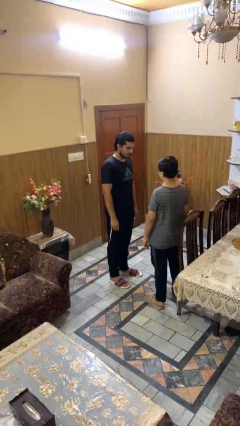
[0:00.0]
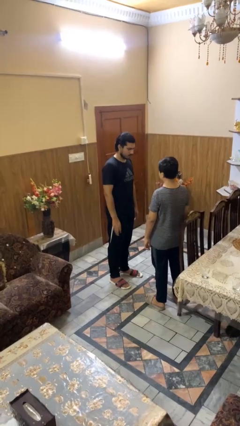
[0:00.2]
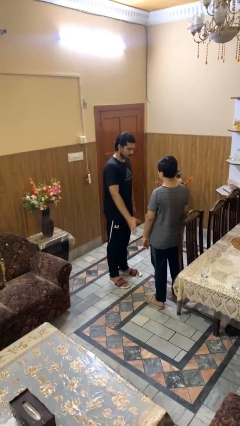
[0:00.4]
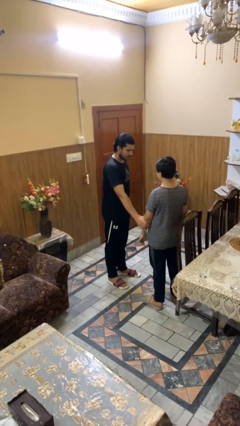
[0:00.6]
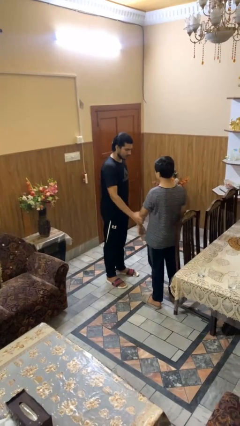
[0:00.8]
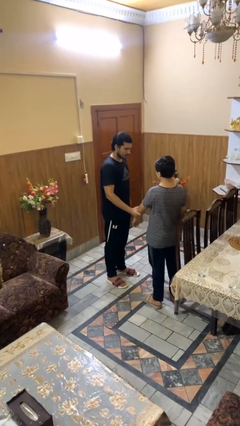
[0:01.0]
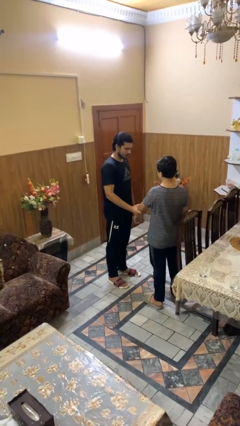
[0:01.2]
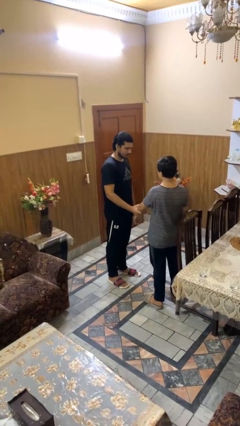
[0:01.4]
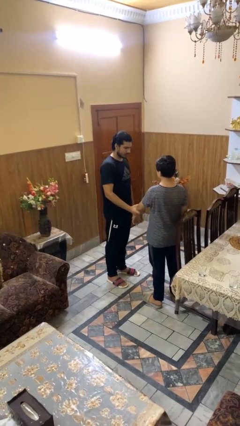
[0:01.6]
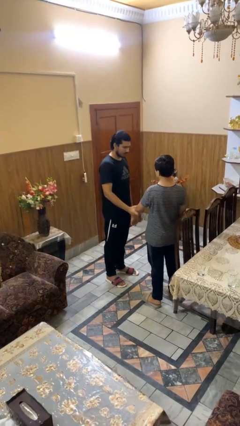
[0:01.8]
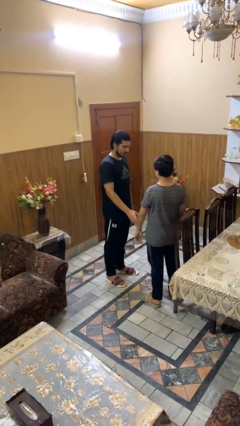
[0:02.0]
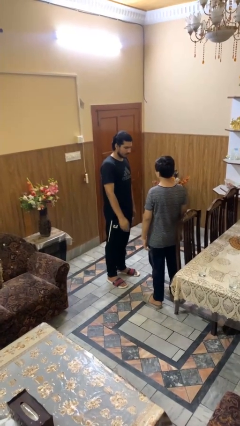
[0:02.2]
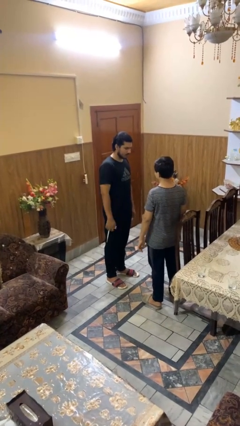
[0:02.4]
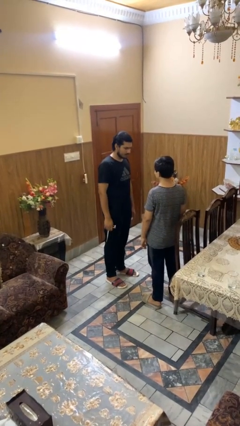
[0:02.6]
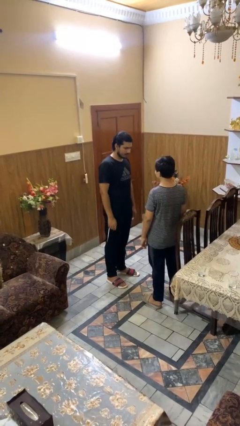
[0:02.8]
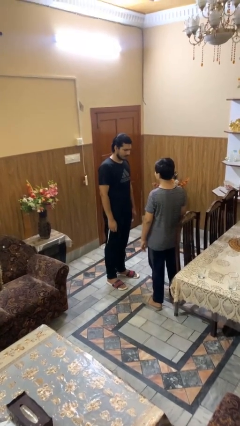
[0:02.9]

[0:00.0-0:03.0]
person grabs person by forearm

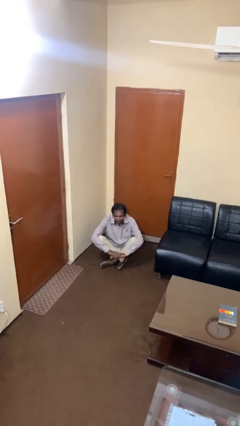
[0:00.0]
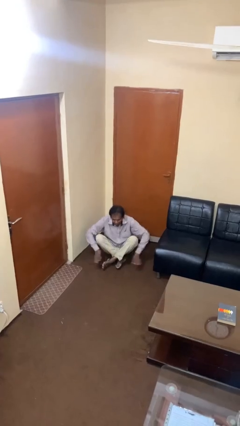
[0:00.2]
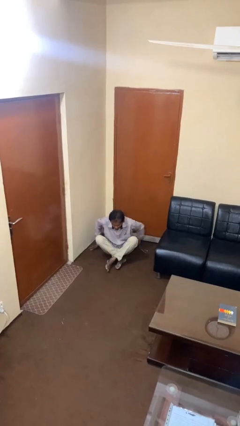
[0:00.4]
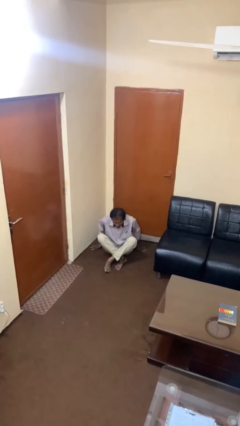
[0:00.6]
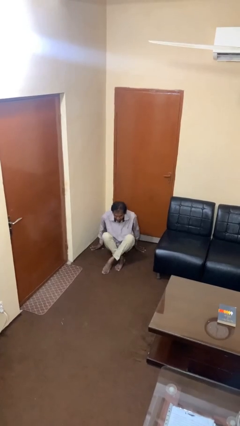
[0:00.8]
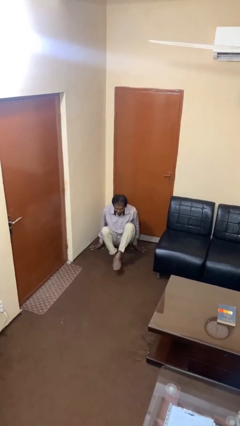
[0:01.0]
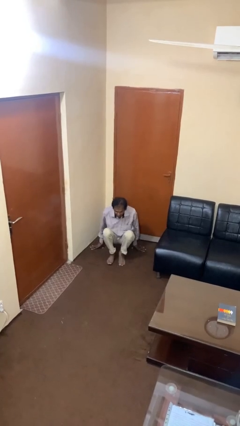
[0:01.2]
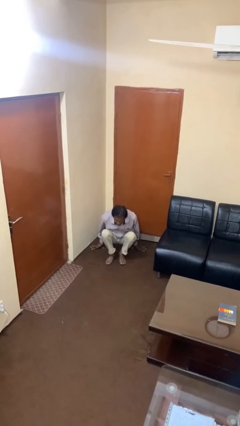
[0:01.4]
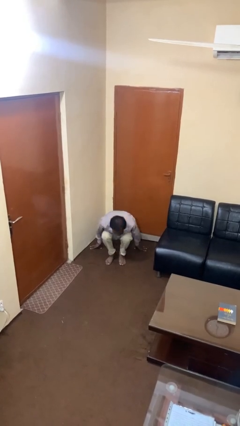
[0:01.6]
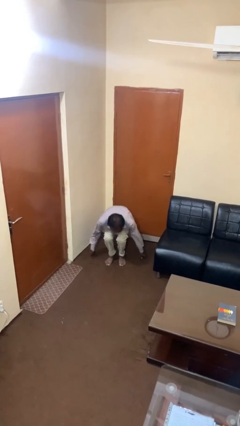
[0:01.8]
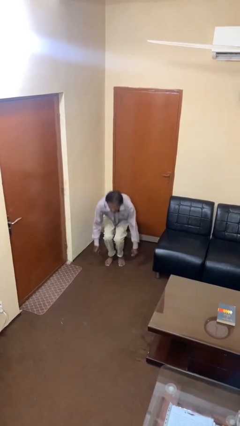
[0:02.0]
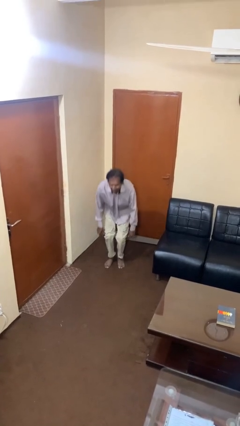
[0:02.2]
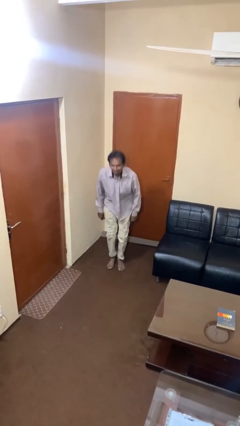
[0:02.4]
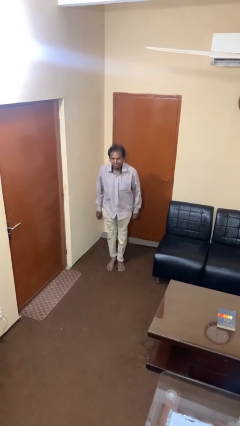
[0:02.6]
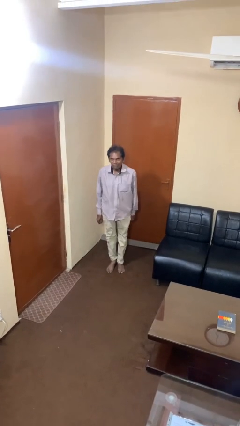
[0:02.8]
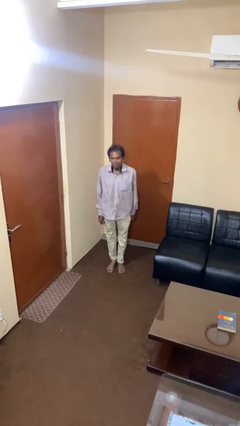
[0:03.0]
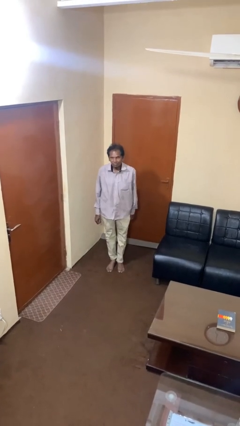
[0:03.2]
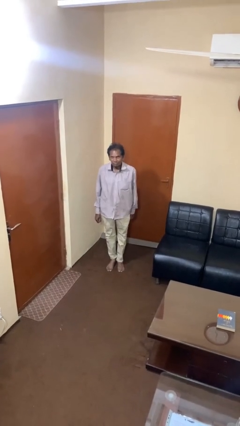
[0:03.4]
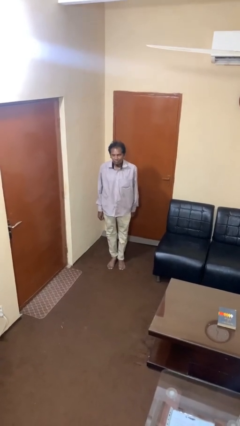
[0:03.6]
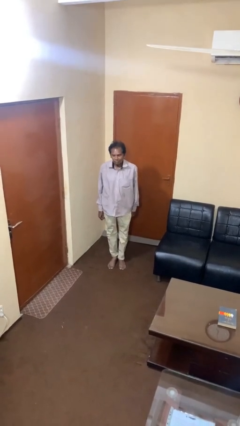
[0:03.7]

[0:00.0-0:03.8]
person stands up from floor

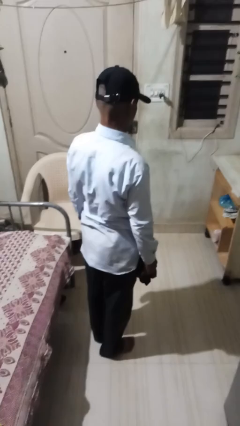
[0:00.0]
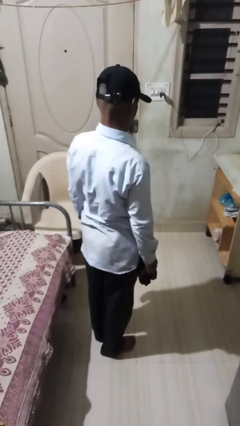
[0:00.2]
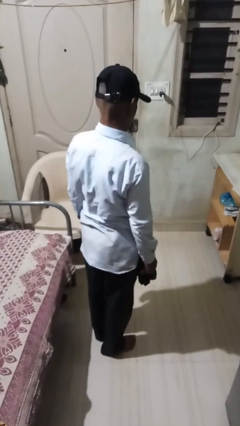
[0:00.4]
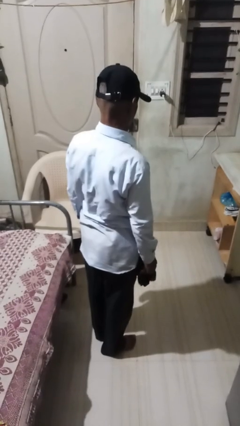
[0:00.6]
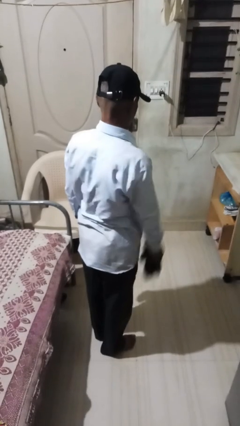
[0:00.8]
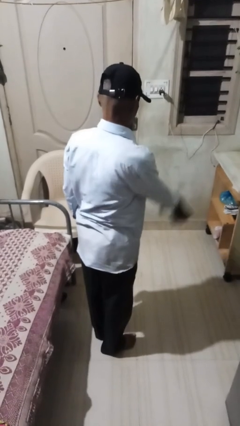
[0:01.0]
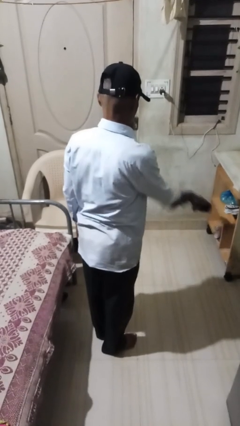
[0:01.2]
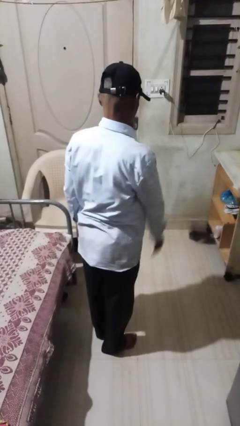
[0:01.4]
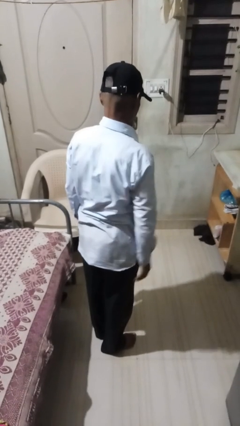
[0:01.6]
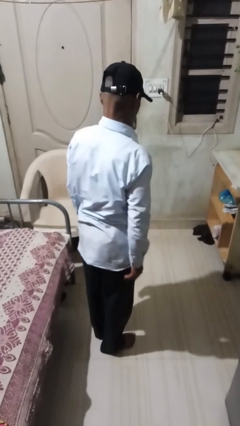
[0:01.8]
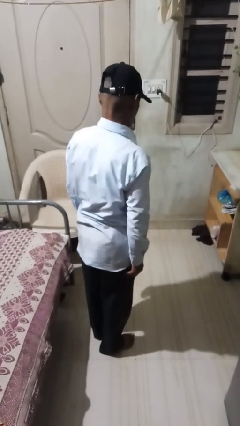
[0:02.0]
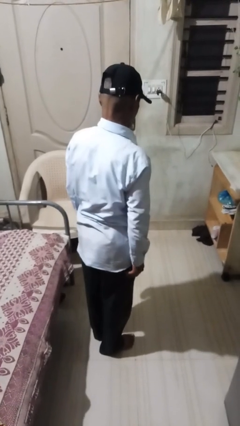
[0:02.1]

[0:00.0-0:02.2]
person throws object to ground

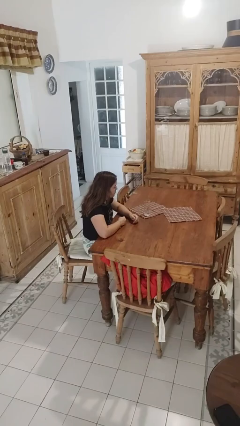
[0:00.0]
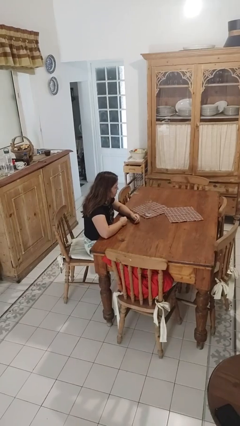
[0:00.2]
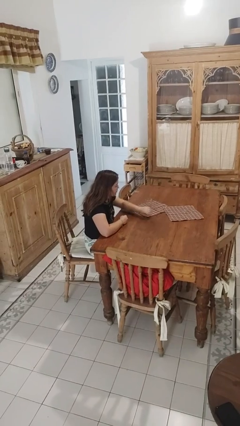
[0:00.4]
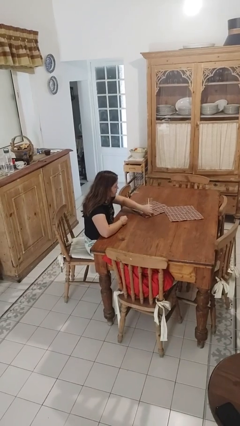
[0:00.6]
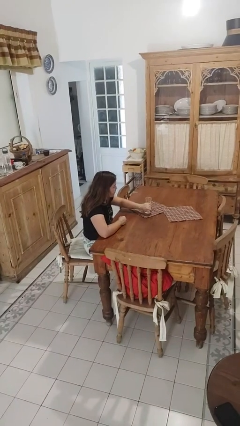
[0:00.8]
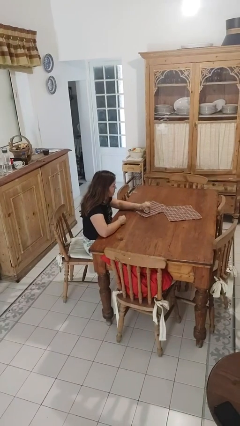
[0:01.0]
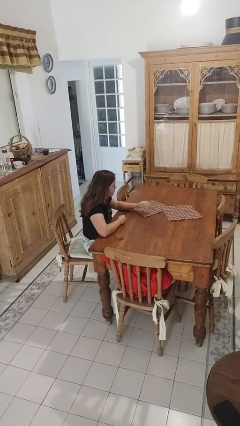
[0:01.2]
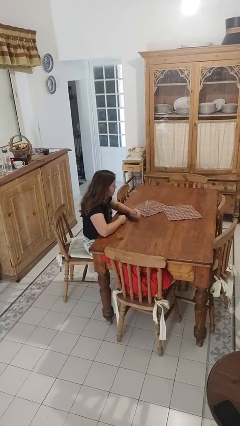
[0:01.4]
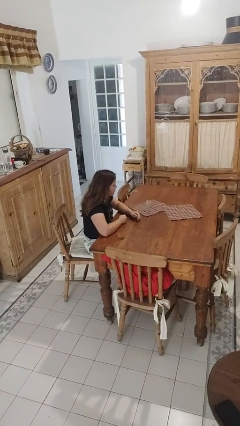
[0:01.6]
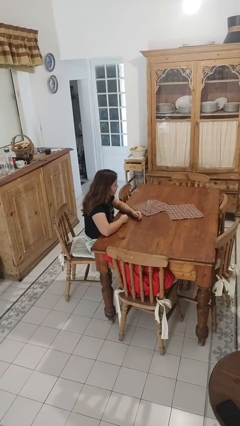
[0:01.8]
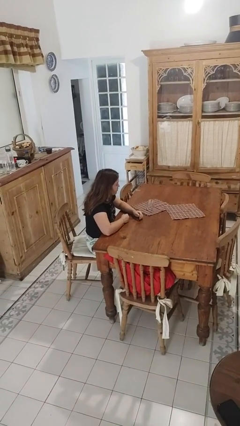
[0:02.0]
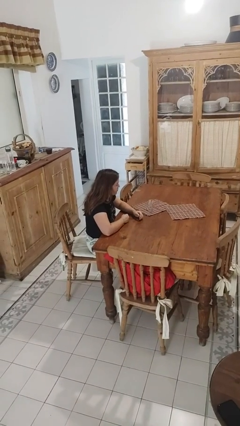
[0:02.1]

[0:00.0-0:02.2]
person knocks over glass

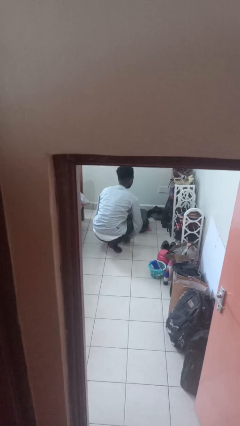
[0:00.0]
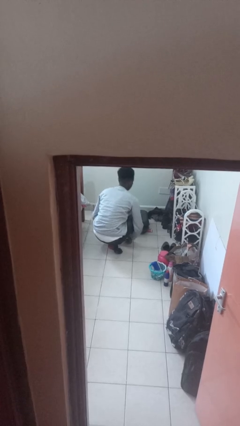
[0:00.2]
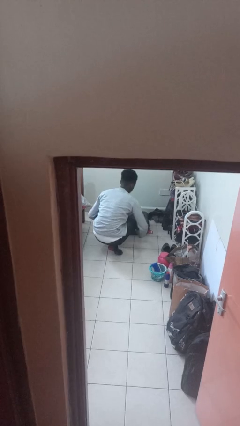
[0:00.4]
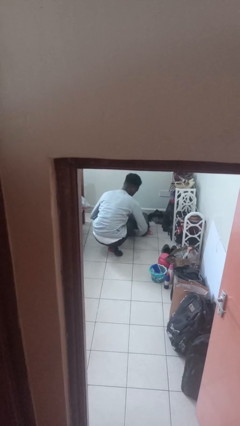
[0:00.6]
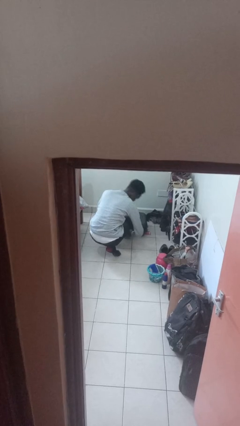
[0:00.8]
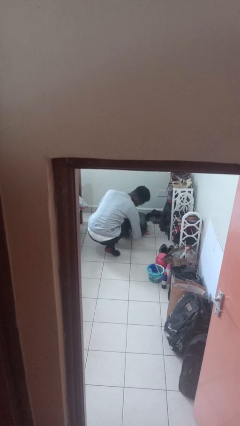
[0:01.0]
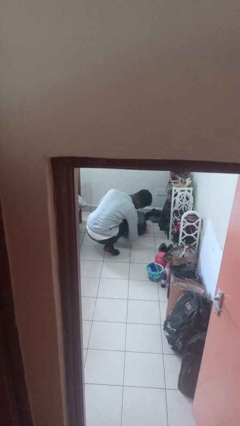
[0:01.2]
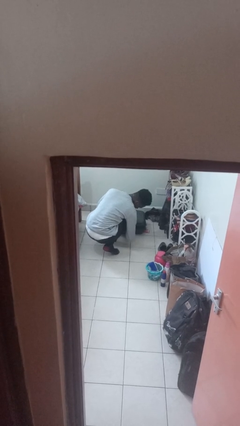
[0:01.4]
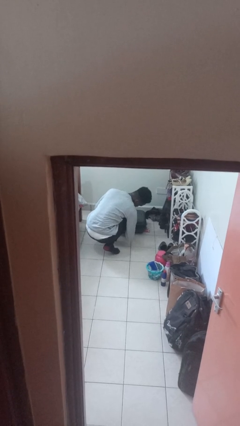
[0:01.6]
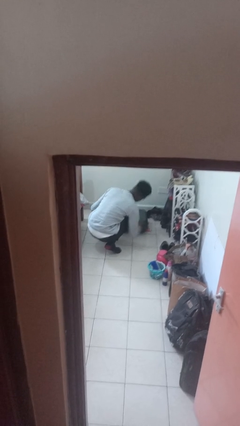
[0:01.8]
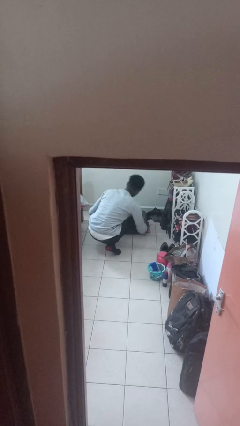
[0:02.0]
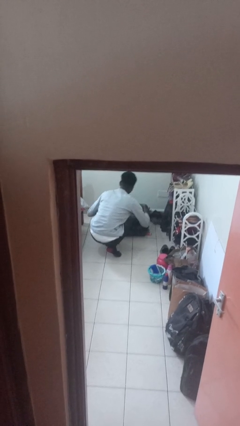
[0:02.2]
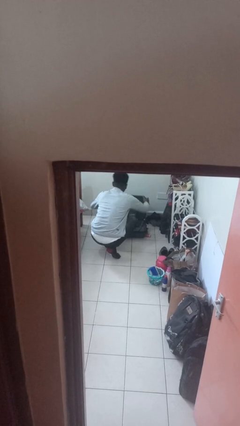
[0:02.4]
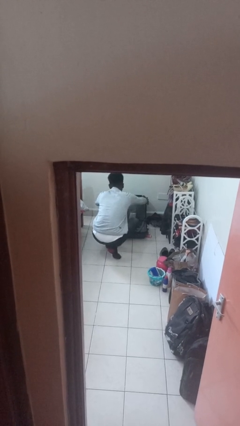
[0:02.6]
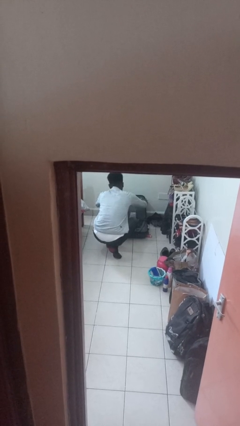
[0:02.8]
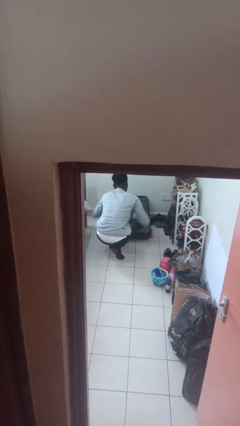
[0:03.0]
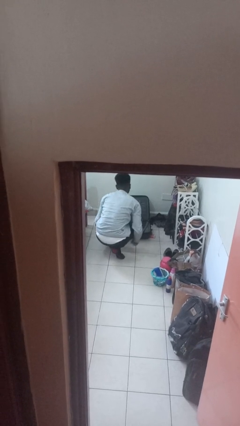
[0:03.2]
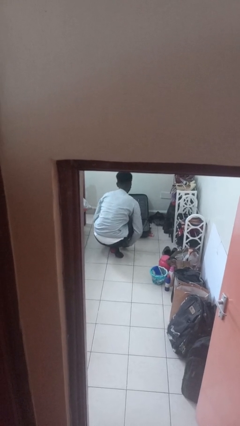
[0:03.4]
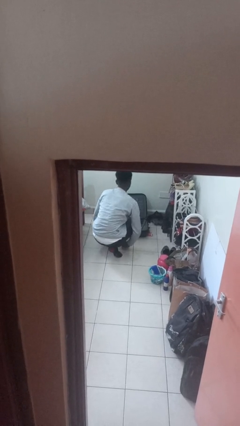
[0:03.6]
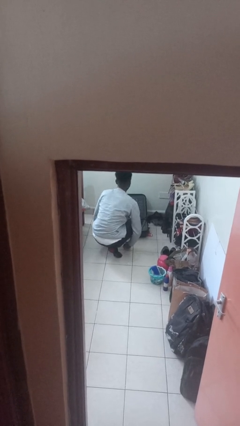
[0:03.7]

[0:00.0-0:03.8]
person opens suitcase

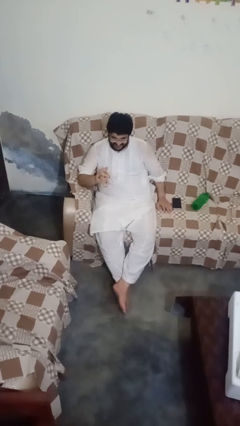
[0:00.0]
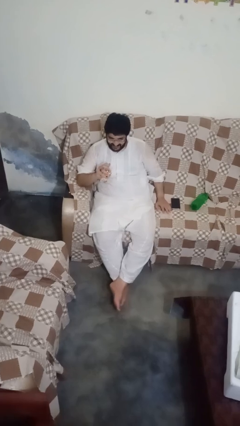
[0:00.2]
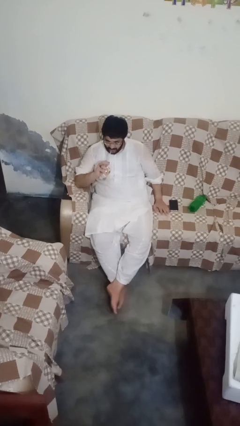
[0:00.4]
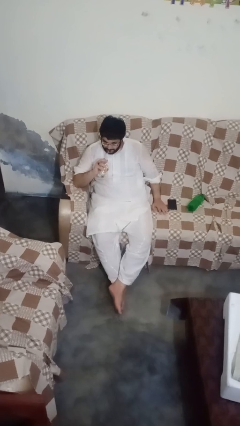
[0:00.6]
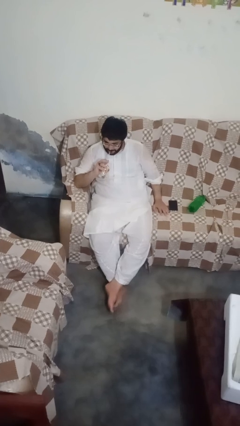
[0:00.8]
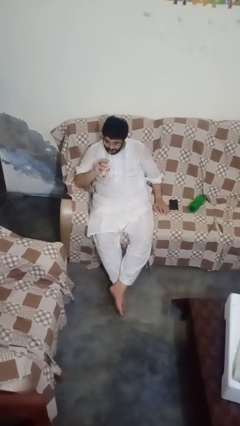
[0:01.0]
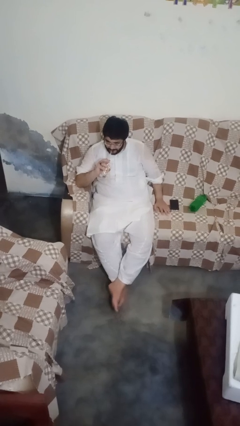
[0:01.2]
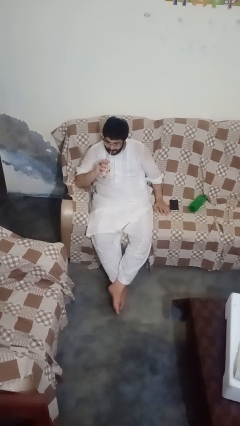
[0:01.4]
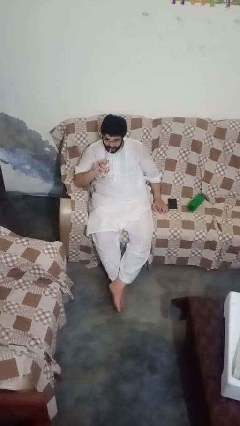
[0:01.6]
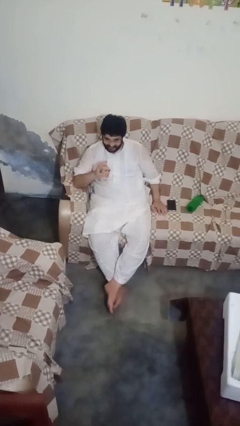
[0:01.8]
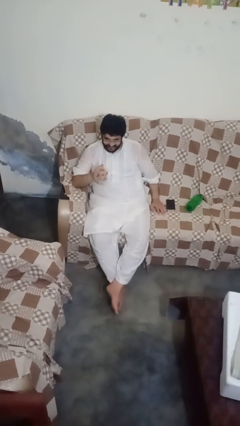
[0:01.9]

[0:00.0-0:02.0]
person drinks from straw

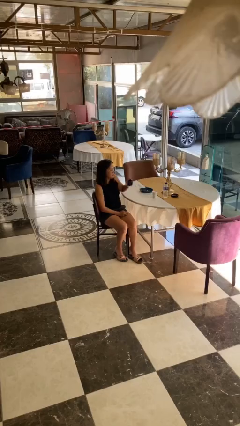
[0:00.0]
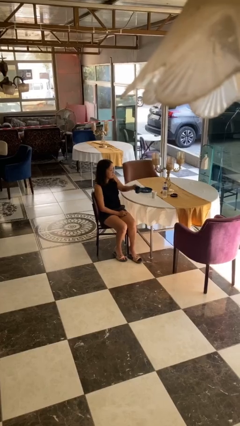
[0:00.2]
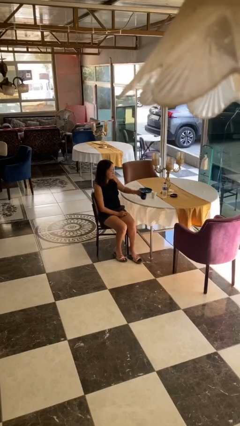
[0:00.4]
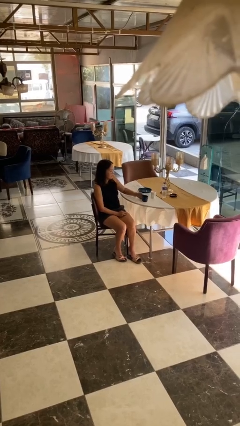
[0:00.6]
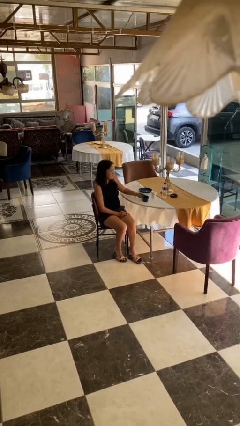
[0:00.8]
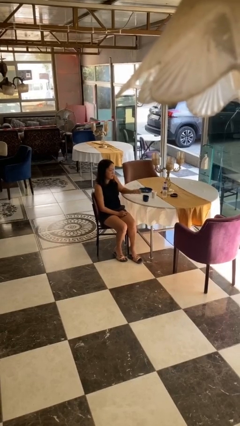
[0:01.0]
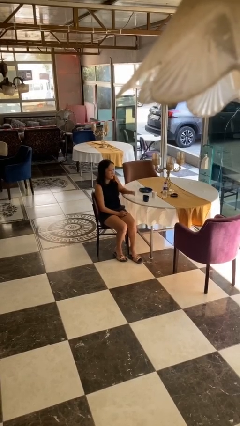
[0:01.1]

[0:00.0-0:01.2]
person puts down object on table
